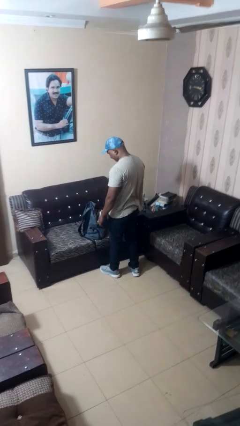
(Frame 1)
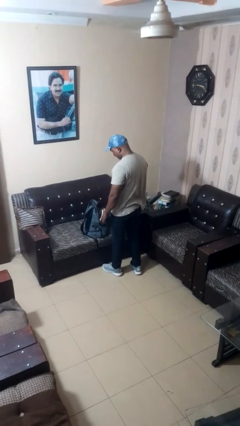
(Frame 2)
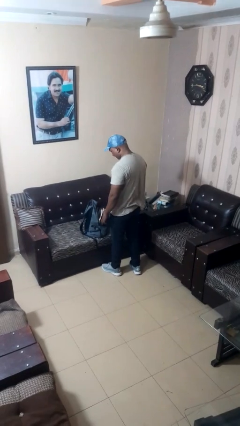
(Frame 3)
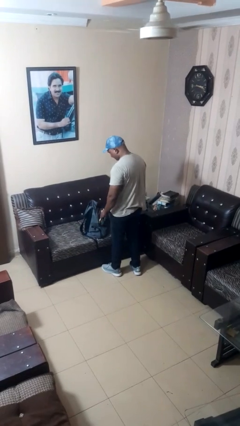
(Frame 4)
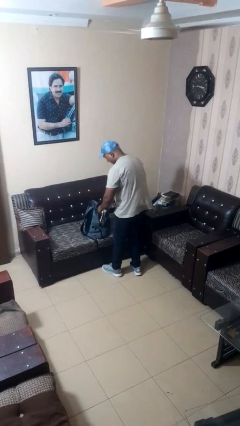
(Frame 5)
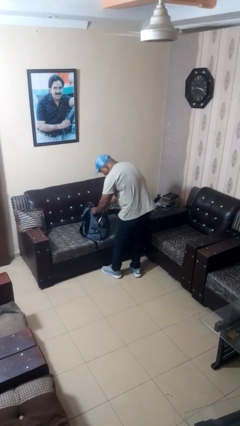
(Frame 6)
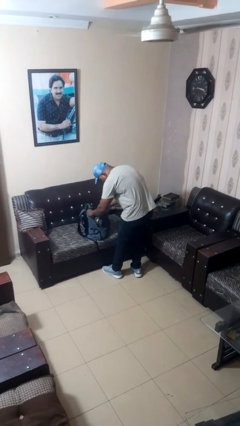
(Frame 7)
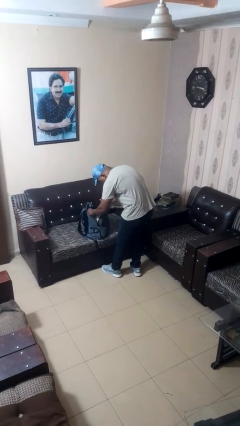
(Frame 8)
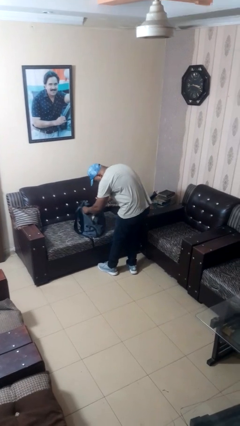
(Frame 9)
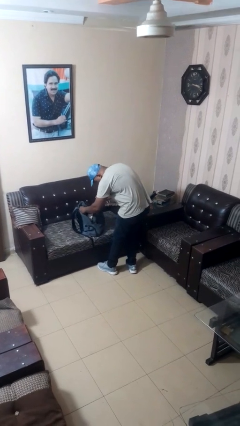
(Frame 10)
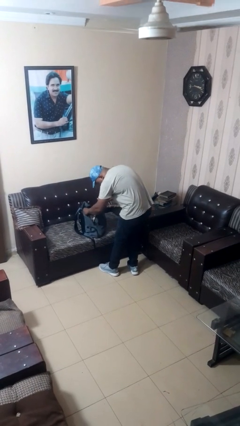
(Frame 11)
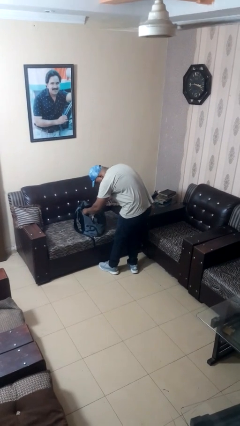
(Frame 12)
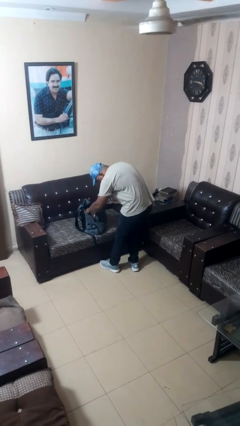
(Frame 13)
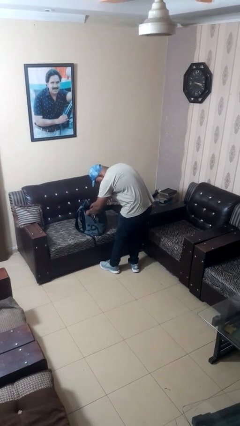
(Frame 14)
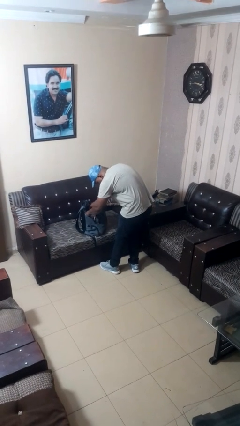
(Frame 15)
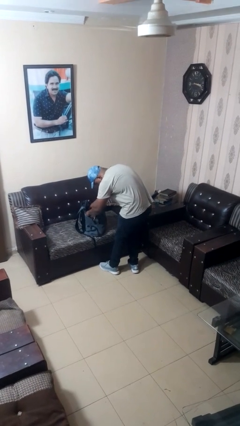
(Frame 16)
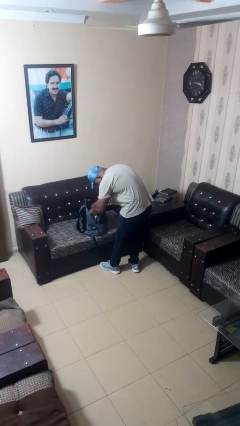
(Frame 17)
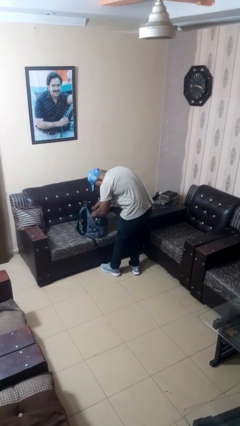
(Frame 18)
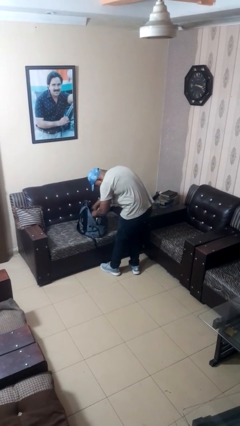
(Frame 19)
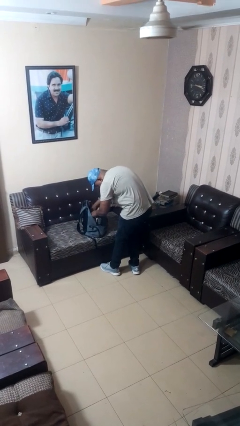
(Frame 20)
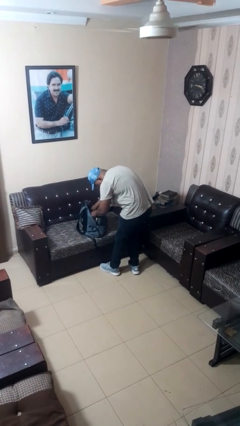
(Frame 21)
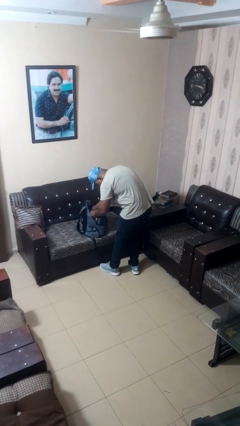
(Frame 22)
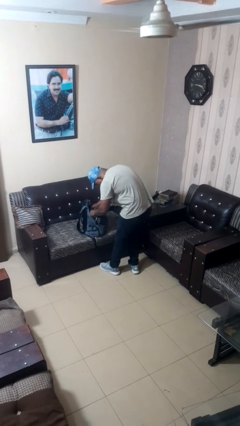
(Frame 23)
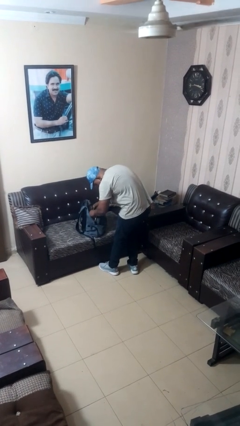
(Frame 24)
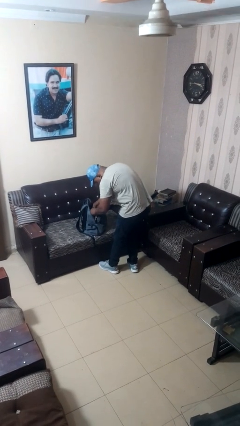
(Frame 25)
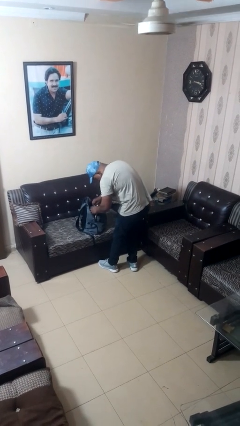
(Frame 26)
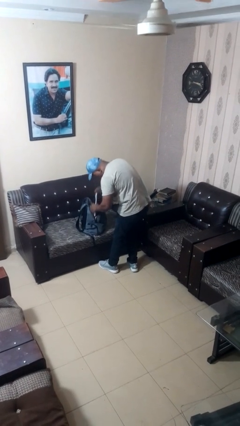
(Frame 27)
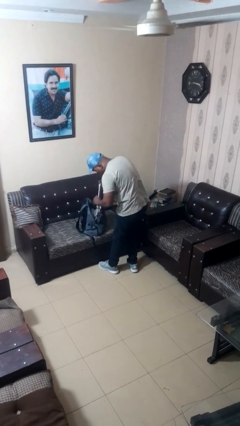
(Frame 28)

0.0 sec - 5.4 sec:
person searches in backpack

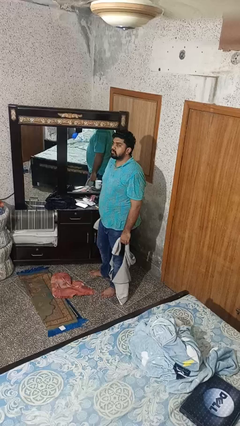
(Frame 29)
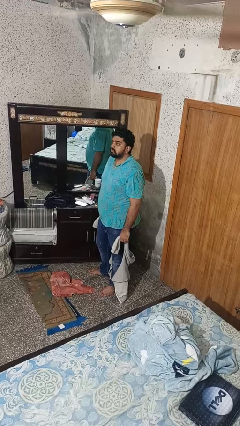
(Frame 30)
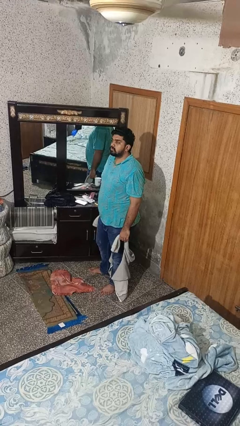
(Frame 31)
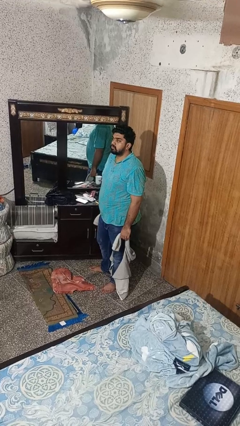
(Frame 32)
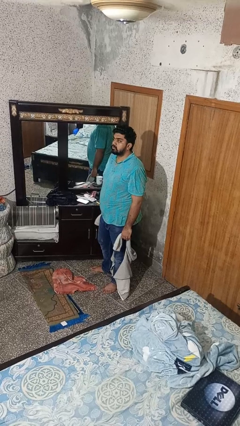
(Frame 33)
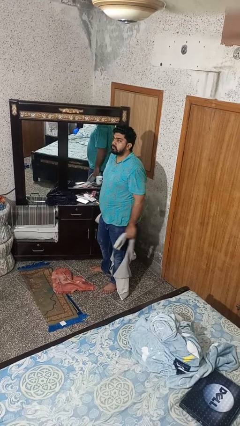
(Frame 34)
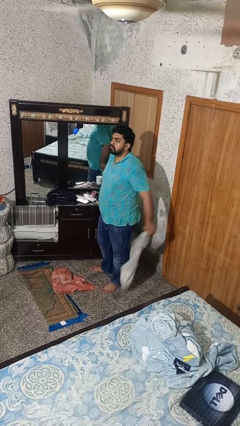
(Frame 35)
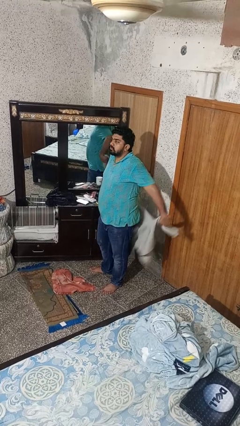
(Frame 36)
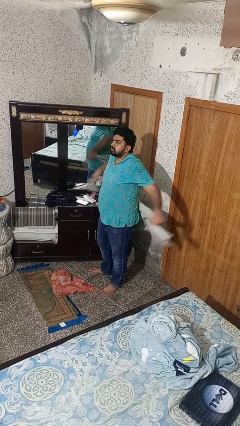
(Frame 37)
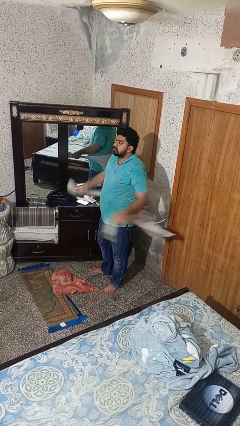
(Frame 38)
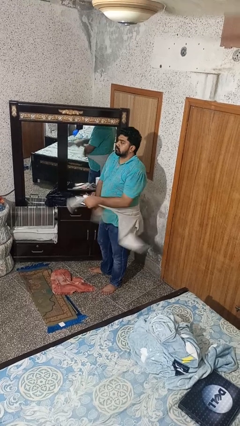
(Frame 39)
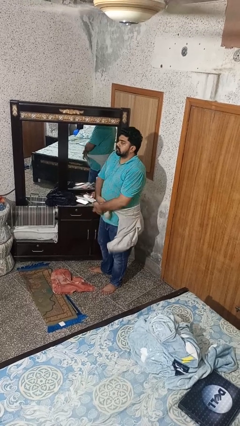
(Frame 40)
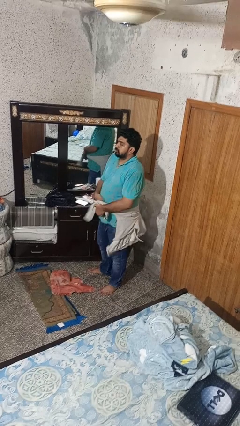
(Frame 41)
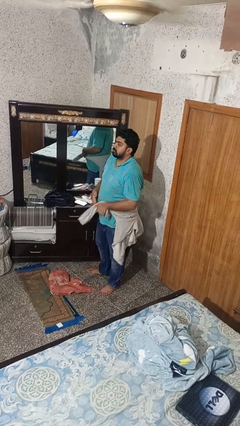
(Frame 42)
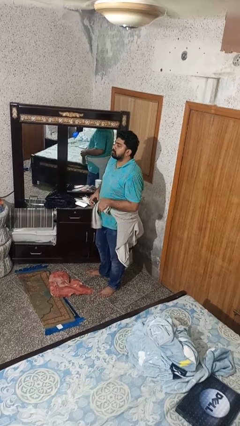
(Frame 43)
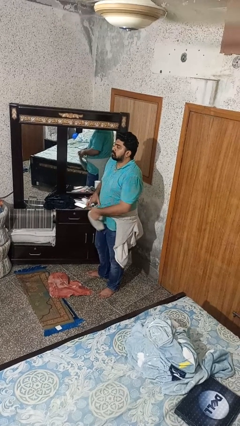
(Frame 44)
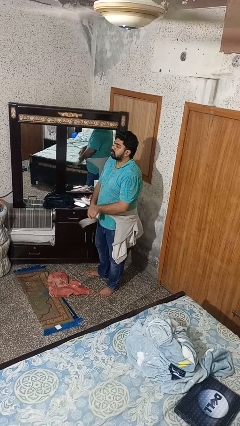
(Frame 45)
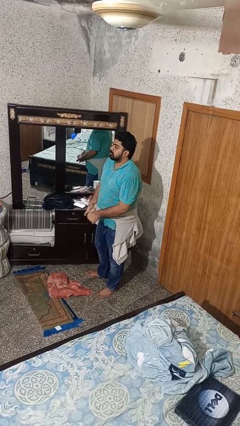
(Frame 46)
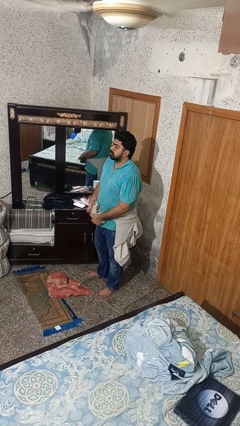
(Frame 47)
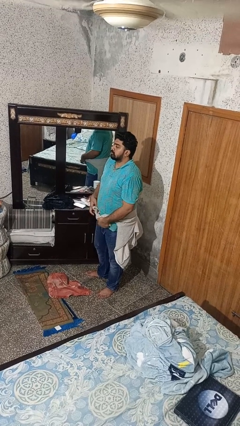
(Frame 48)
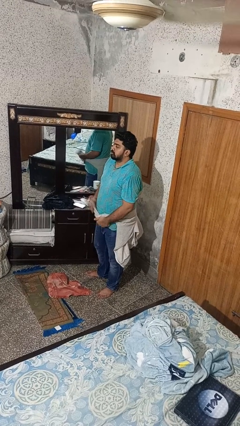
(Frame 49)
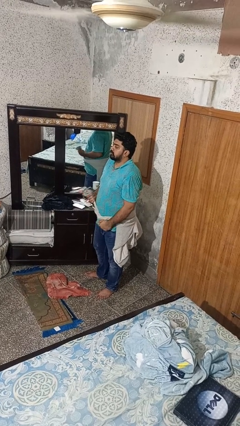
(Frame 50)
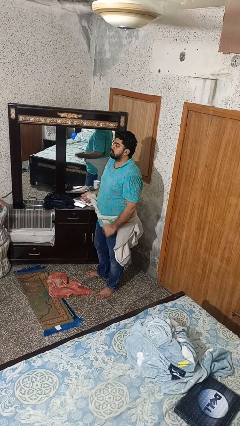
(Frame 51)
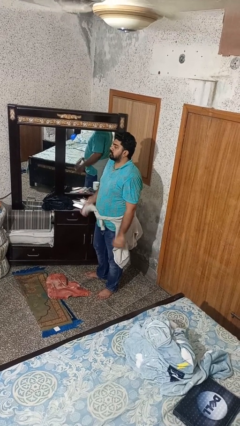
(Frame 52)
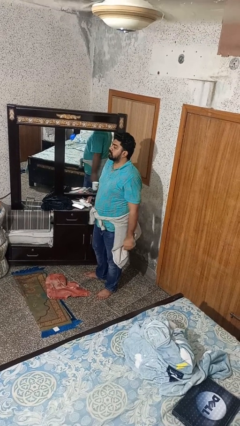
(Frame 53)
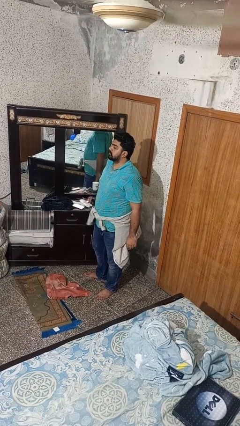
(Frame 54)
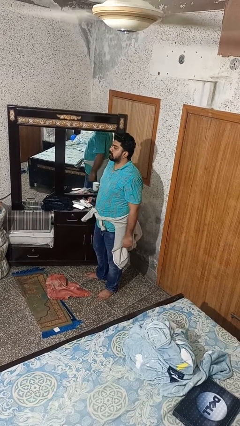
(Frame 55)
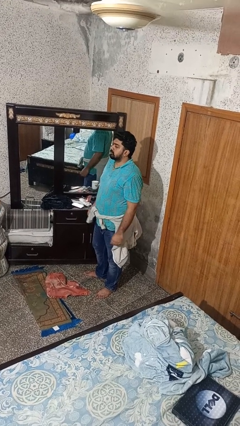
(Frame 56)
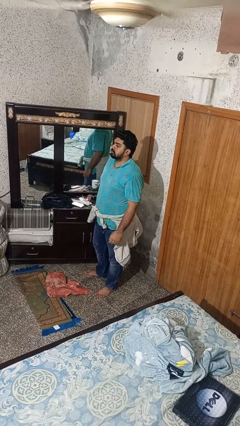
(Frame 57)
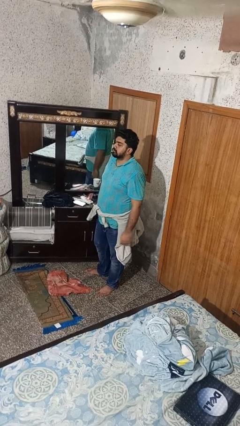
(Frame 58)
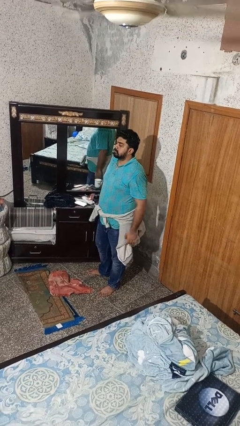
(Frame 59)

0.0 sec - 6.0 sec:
person ties jacket around waist

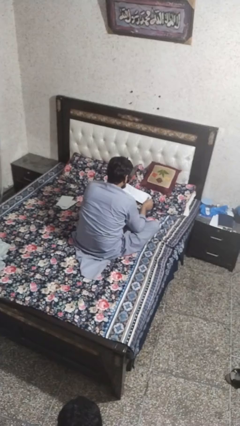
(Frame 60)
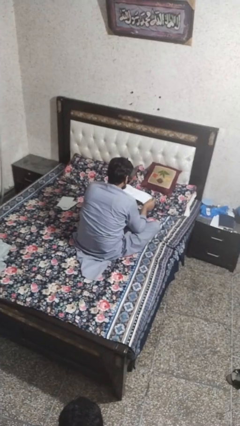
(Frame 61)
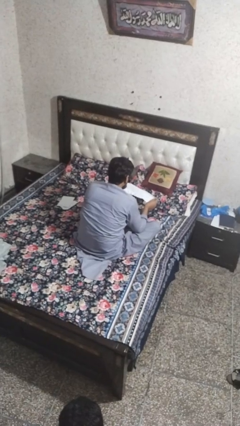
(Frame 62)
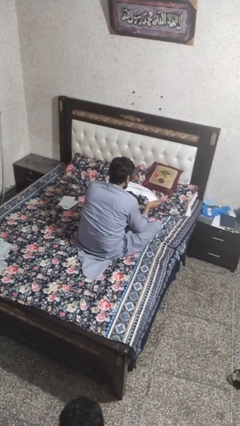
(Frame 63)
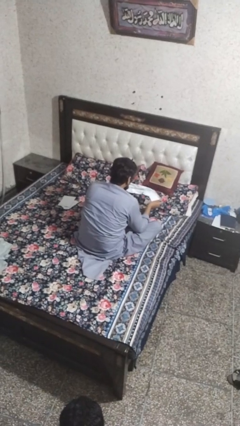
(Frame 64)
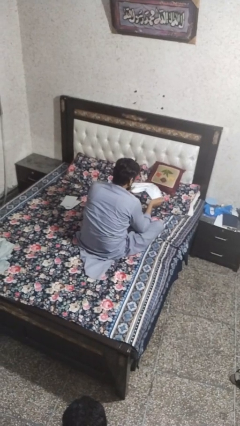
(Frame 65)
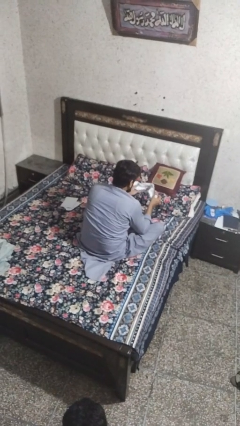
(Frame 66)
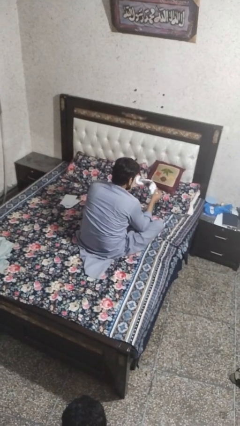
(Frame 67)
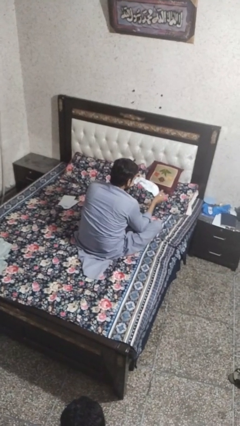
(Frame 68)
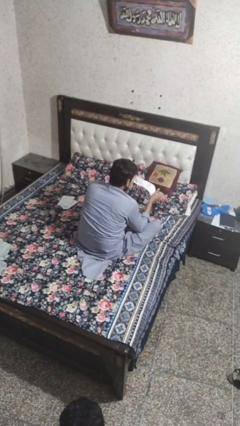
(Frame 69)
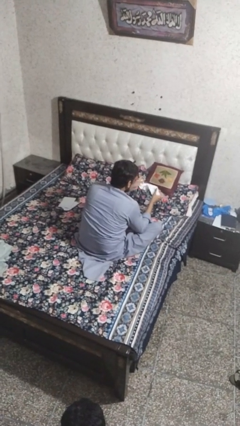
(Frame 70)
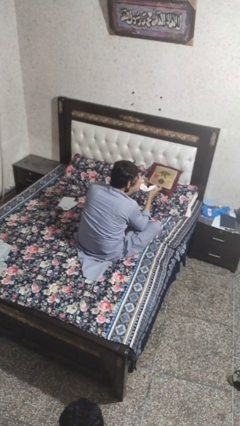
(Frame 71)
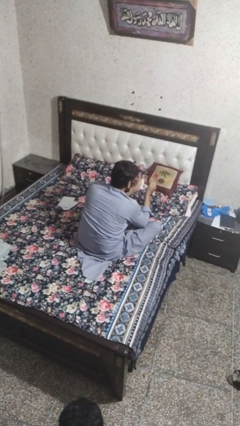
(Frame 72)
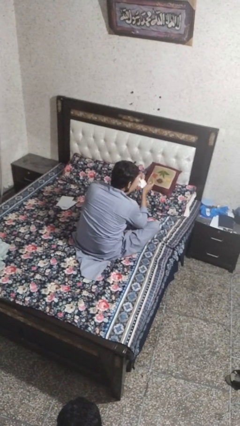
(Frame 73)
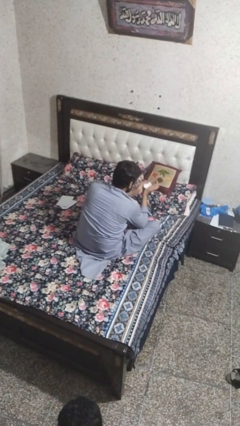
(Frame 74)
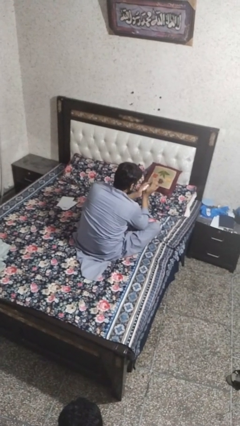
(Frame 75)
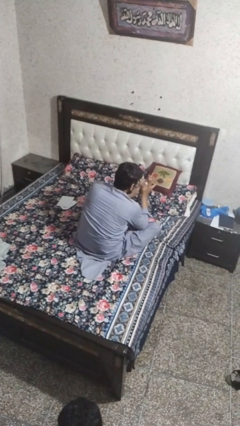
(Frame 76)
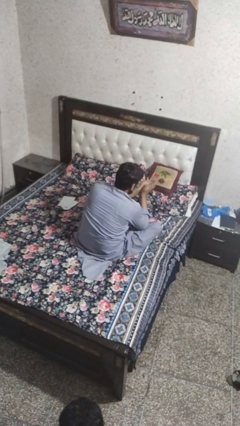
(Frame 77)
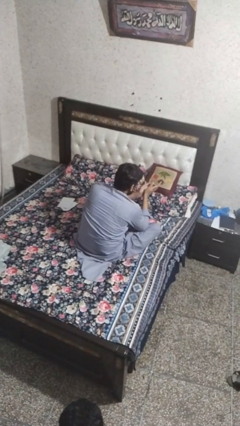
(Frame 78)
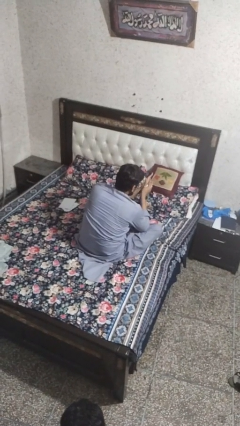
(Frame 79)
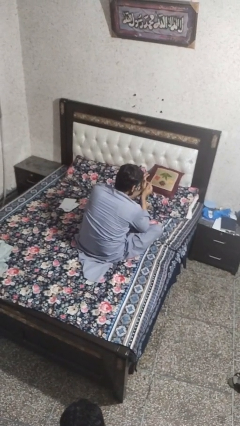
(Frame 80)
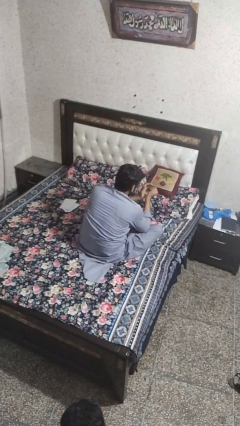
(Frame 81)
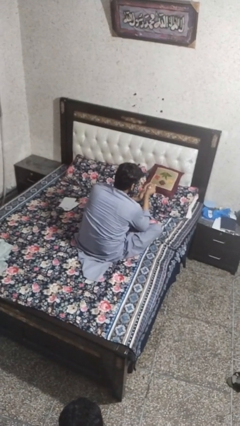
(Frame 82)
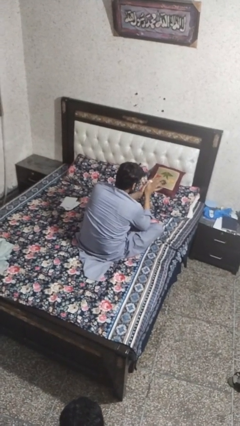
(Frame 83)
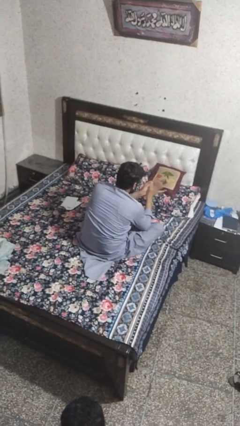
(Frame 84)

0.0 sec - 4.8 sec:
person crumples paper

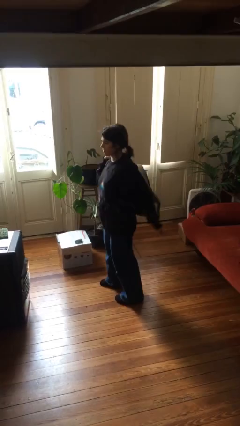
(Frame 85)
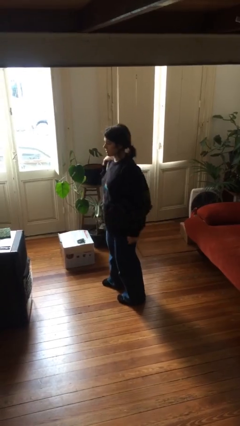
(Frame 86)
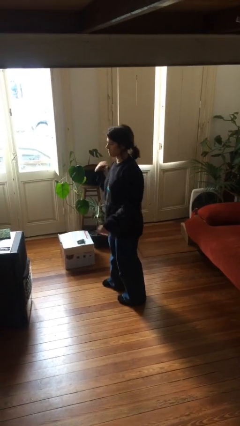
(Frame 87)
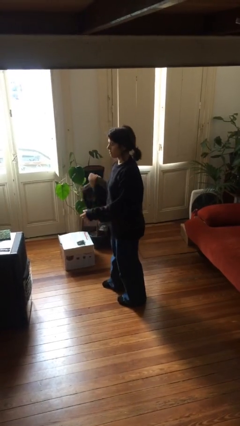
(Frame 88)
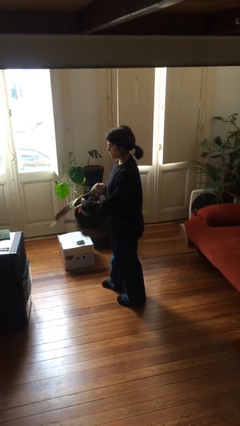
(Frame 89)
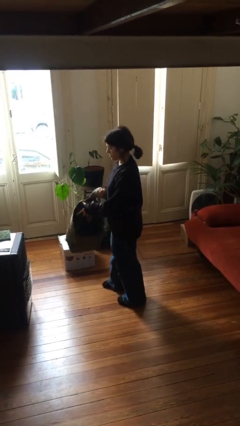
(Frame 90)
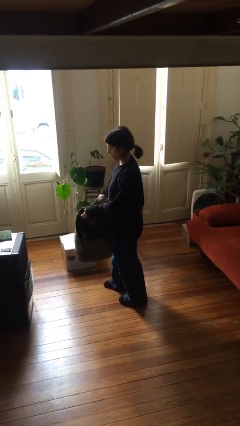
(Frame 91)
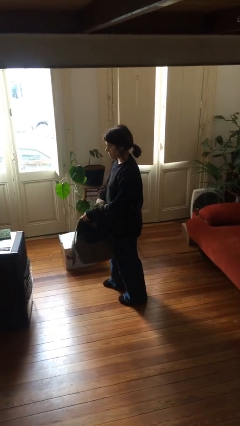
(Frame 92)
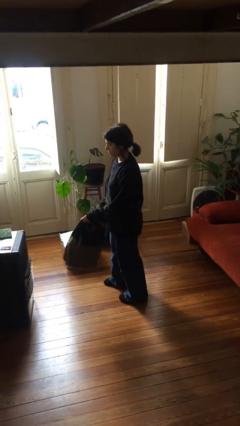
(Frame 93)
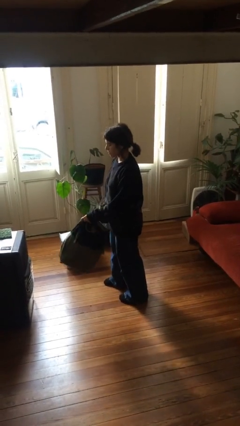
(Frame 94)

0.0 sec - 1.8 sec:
person takes off backpack
